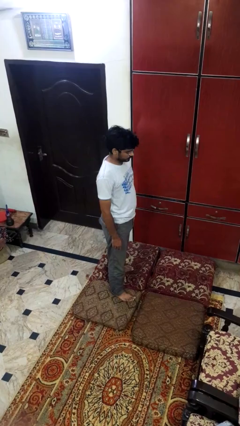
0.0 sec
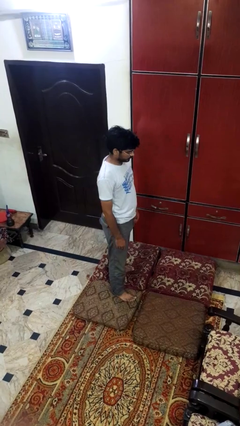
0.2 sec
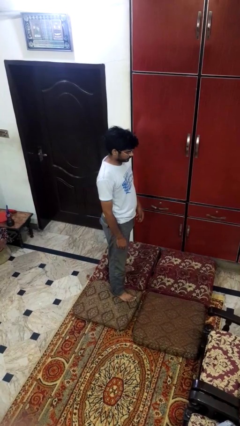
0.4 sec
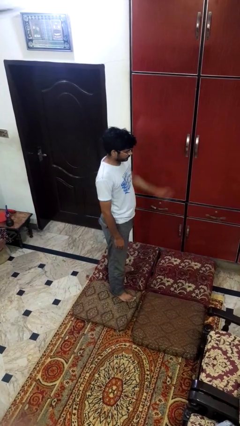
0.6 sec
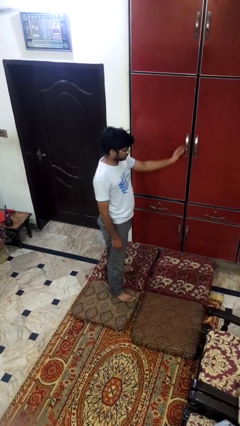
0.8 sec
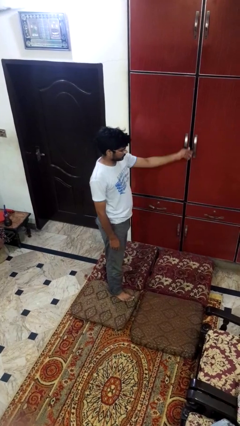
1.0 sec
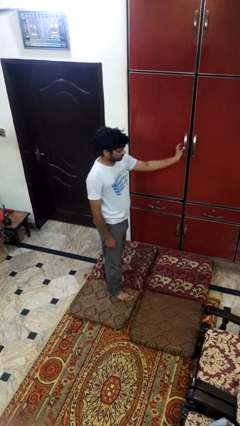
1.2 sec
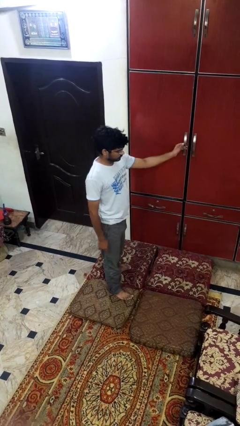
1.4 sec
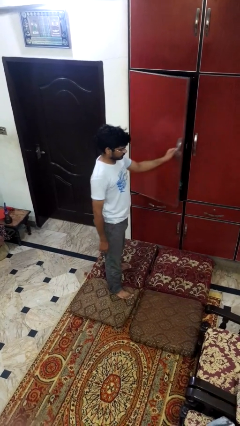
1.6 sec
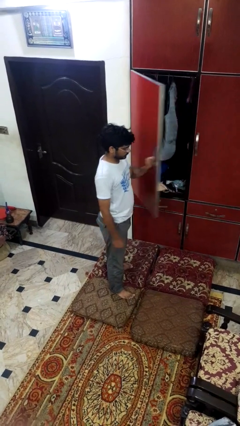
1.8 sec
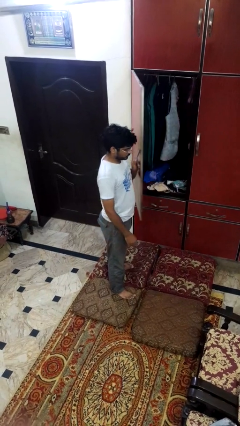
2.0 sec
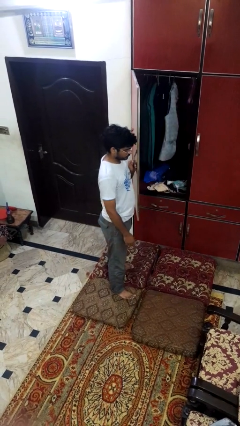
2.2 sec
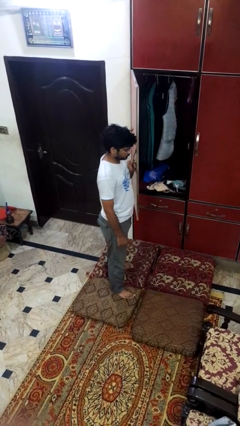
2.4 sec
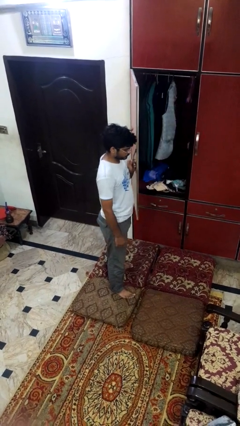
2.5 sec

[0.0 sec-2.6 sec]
person opens closet door

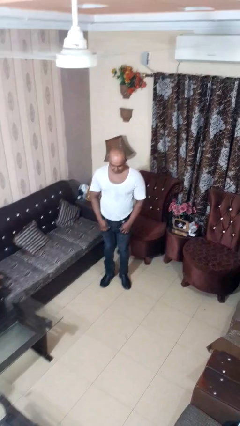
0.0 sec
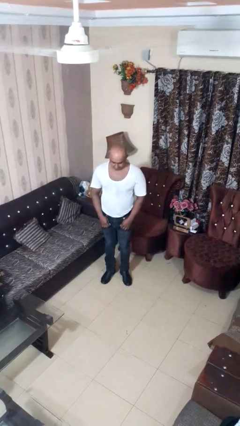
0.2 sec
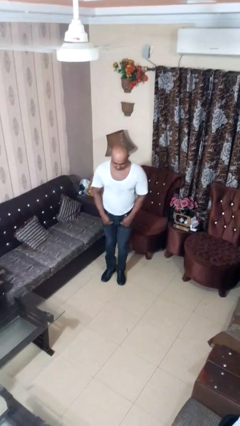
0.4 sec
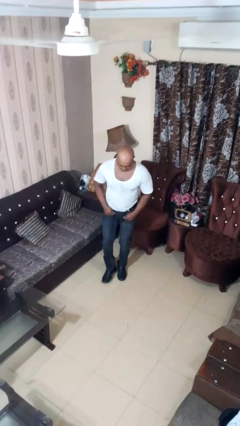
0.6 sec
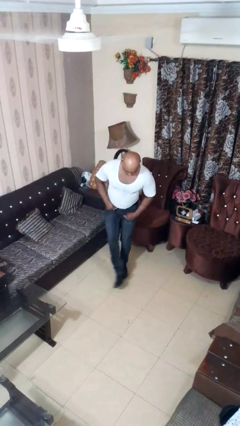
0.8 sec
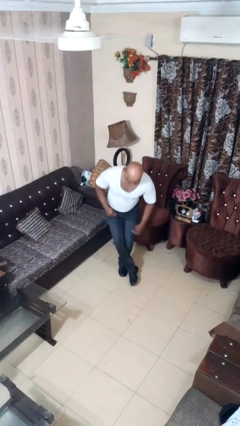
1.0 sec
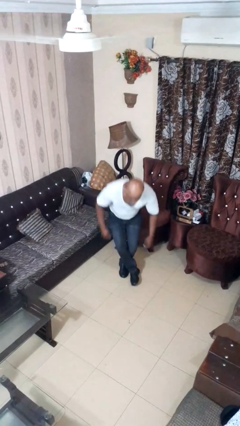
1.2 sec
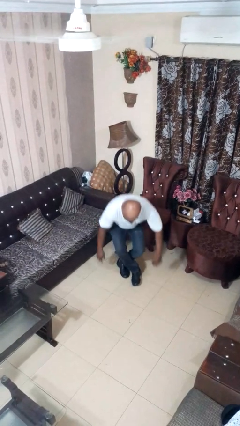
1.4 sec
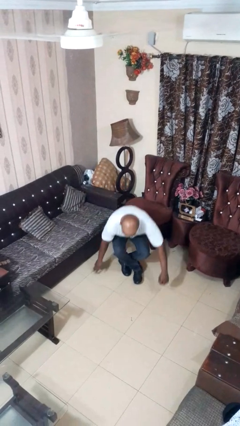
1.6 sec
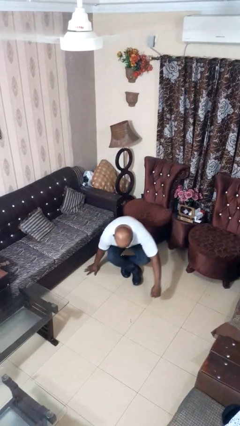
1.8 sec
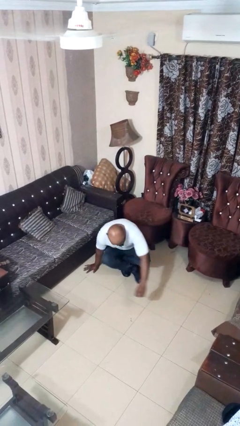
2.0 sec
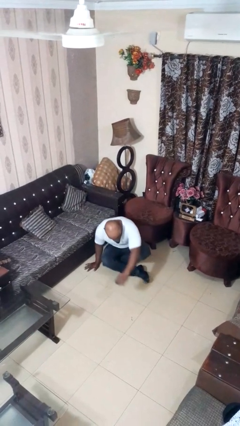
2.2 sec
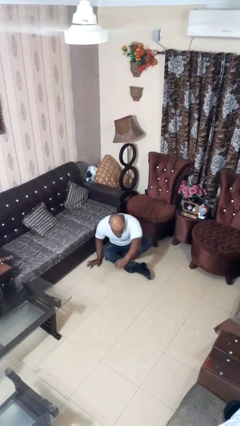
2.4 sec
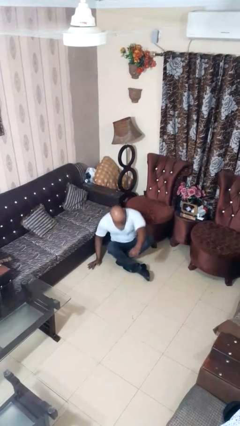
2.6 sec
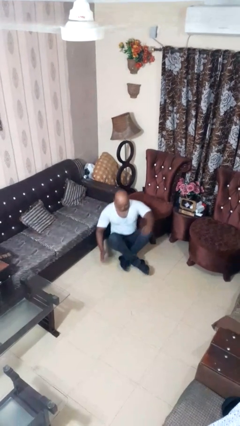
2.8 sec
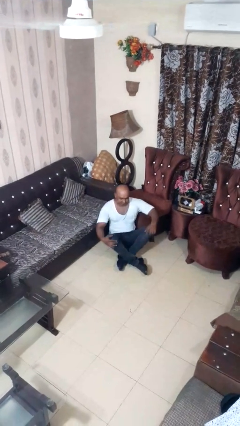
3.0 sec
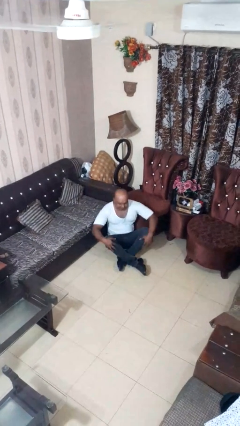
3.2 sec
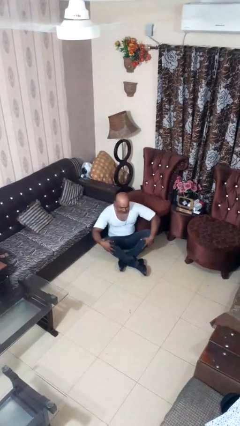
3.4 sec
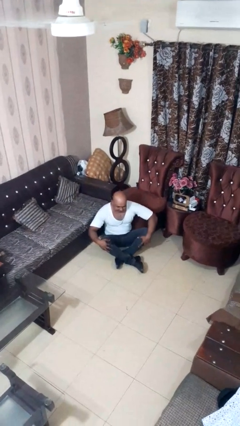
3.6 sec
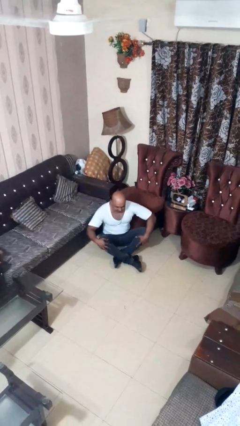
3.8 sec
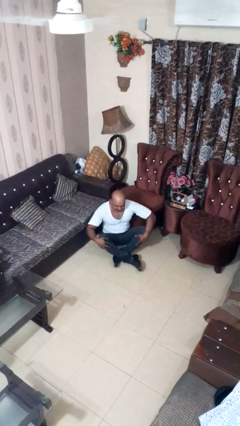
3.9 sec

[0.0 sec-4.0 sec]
person sits crisscross

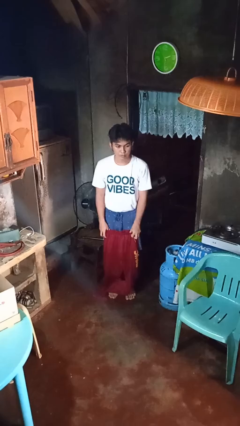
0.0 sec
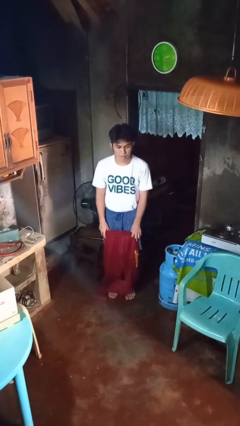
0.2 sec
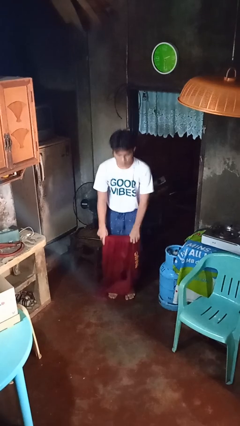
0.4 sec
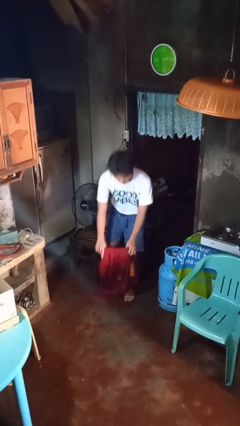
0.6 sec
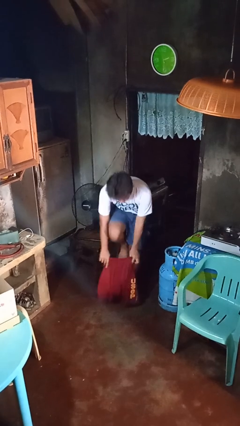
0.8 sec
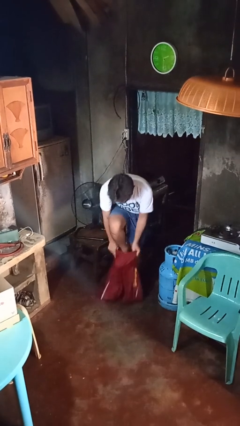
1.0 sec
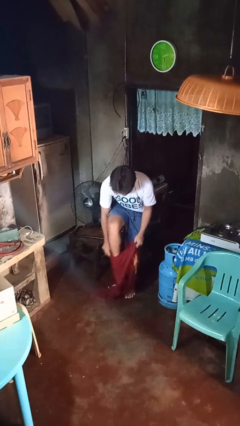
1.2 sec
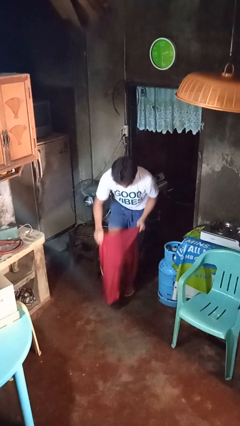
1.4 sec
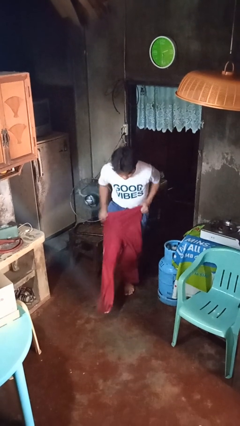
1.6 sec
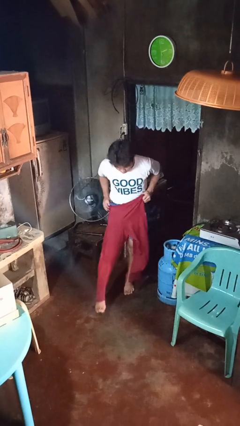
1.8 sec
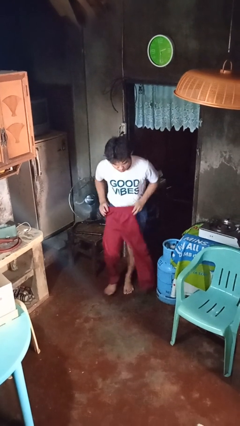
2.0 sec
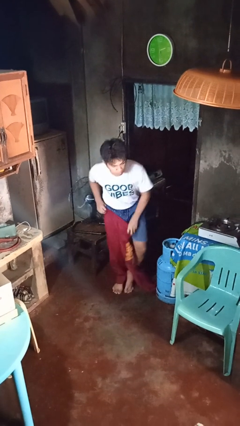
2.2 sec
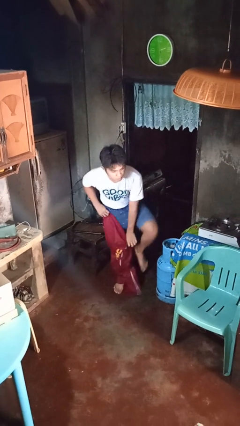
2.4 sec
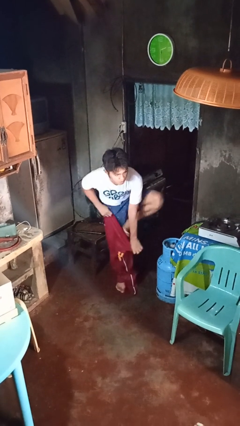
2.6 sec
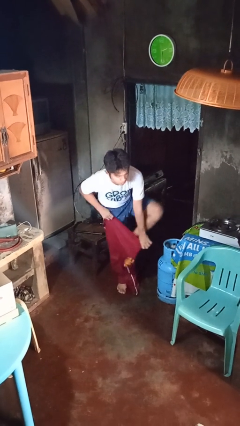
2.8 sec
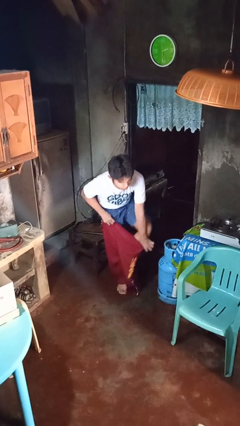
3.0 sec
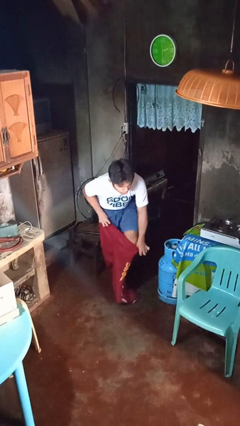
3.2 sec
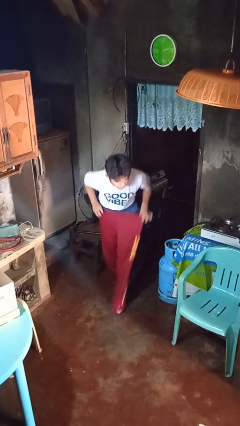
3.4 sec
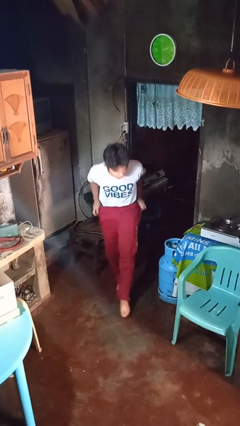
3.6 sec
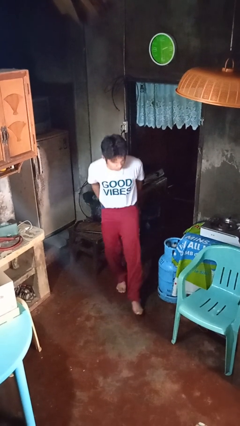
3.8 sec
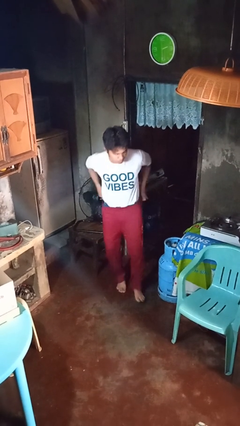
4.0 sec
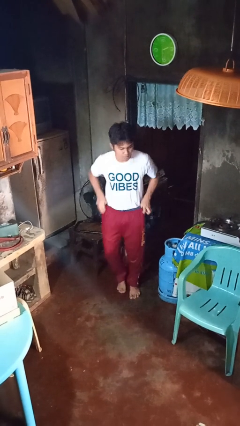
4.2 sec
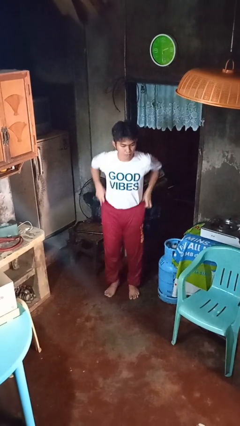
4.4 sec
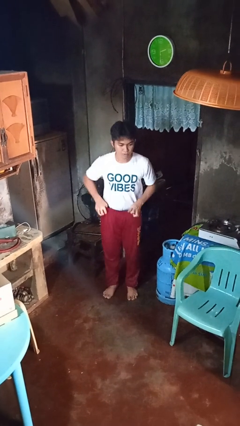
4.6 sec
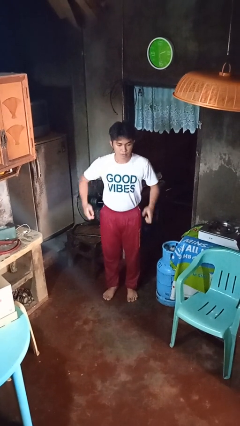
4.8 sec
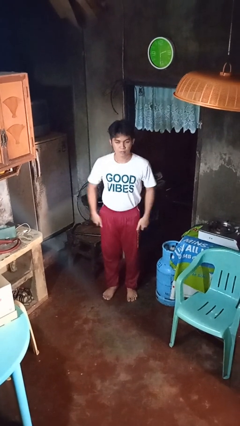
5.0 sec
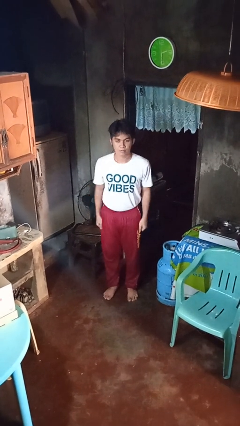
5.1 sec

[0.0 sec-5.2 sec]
person puts on pants

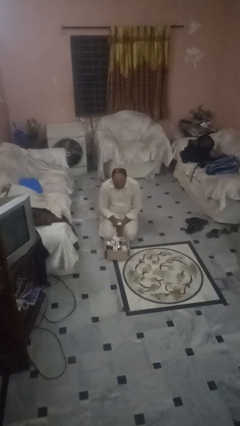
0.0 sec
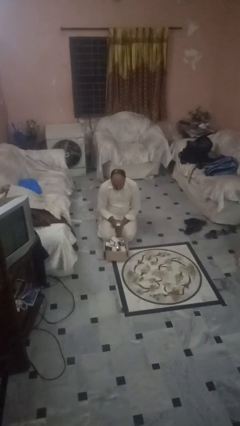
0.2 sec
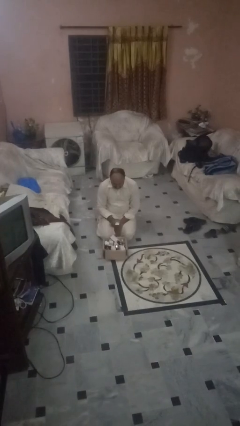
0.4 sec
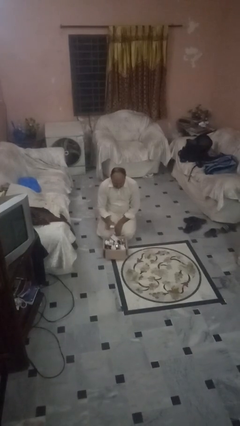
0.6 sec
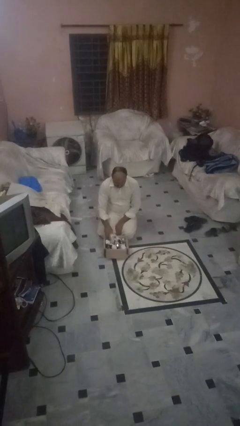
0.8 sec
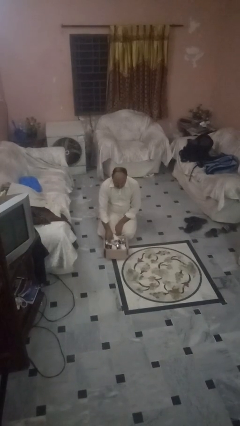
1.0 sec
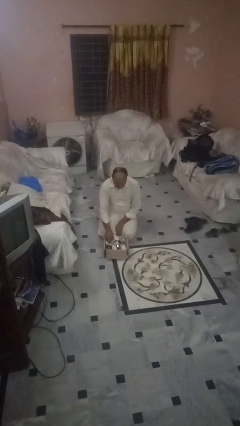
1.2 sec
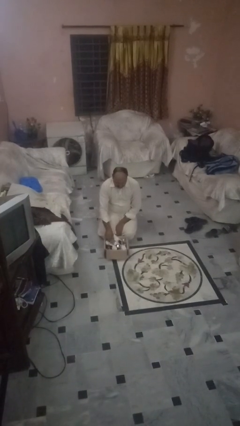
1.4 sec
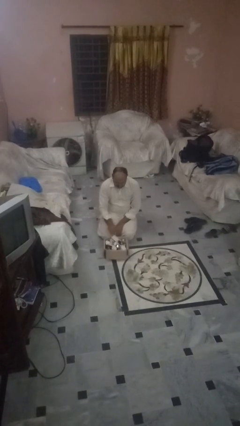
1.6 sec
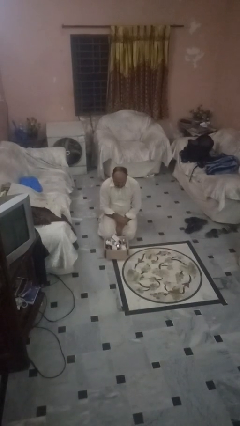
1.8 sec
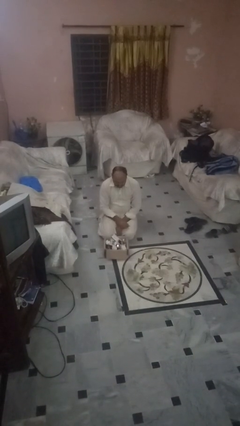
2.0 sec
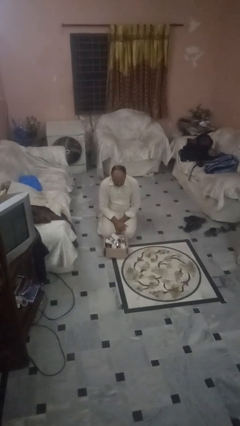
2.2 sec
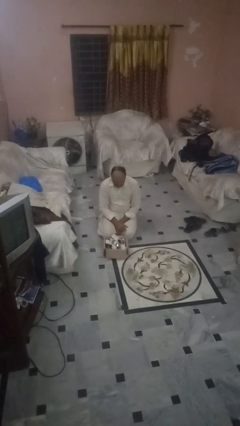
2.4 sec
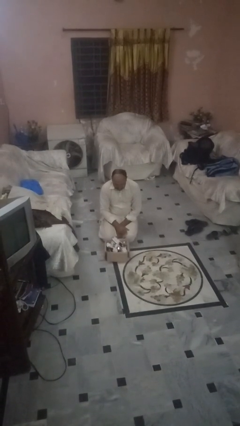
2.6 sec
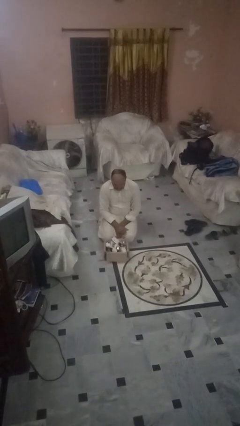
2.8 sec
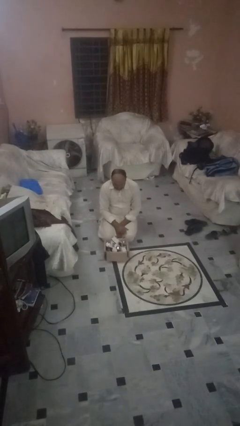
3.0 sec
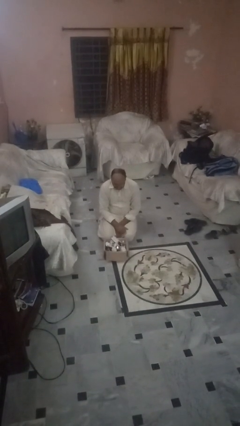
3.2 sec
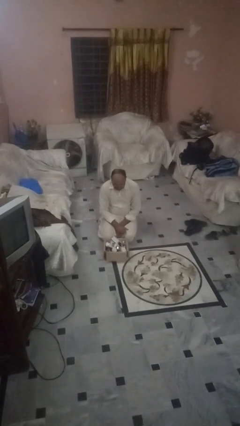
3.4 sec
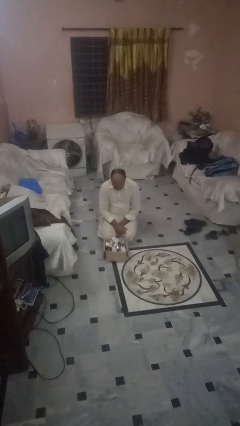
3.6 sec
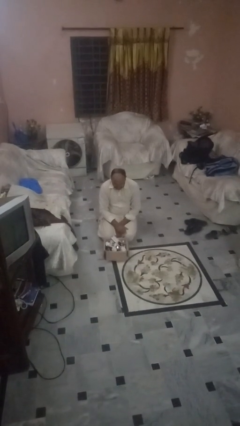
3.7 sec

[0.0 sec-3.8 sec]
person puts object into box

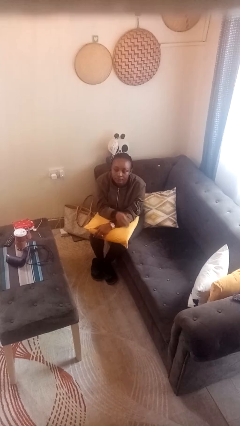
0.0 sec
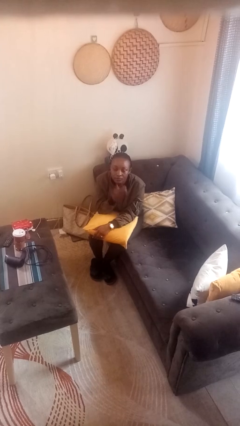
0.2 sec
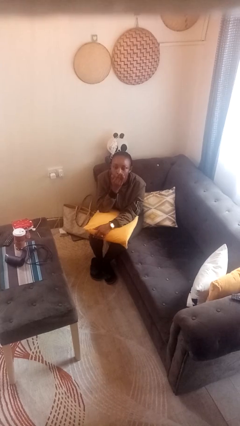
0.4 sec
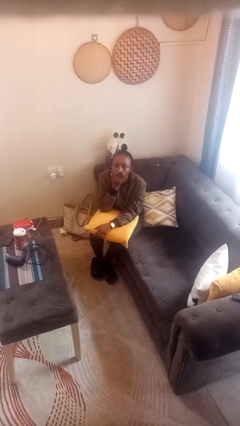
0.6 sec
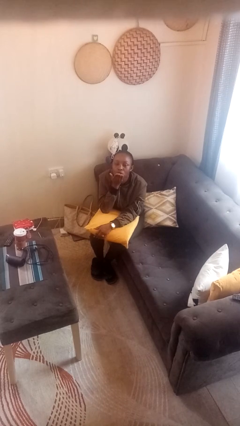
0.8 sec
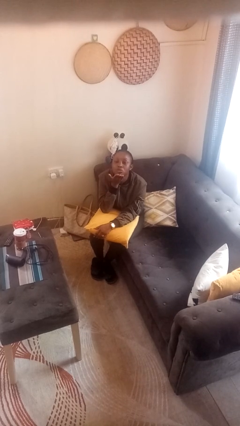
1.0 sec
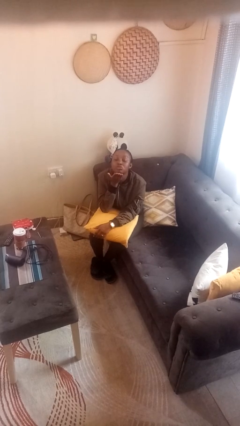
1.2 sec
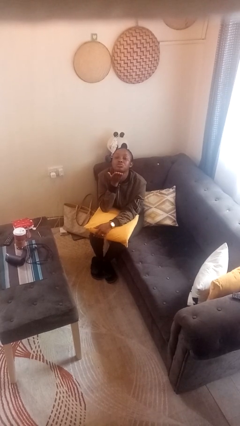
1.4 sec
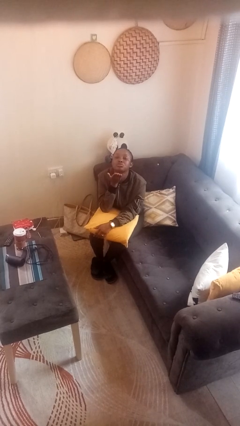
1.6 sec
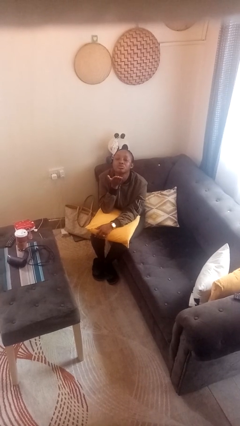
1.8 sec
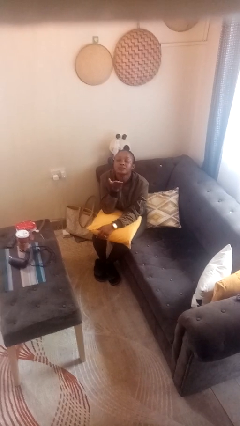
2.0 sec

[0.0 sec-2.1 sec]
person gestures blow kiss

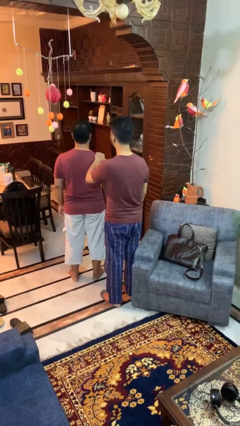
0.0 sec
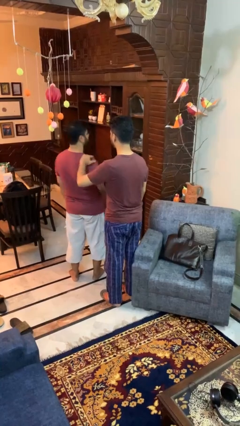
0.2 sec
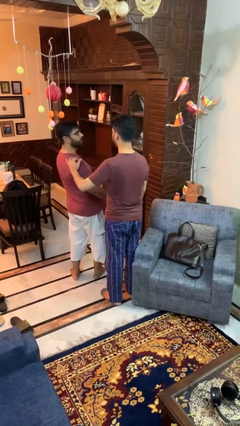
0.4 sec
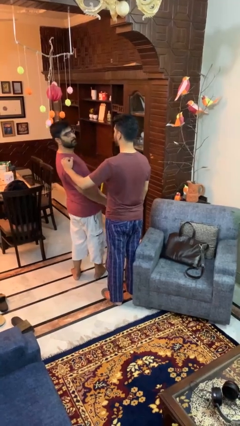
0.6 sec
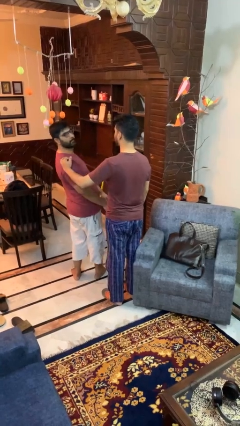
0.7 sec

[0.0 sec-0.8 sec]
person spins person around
